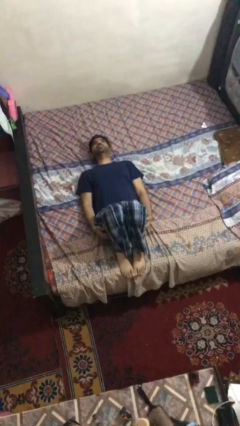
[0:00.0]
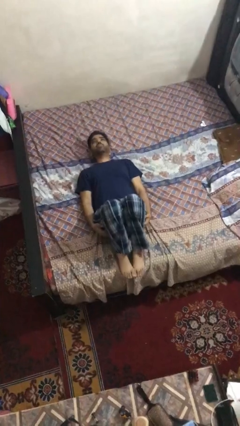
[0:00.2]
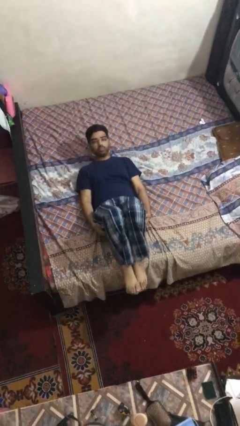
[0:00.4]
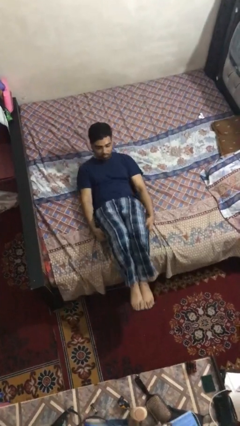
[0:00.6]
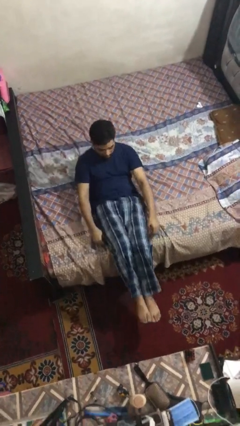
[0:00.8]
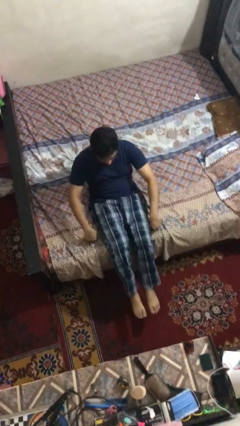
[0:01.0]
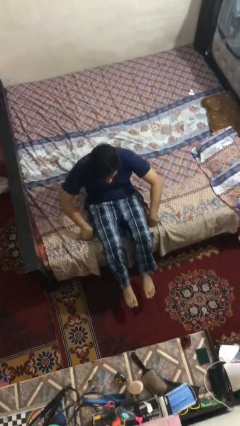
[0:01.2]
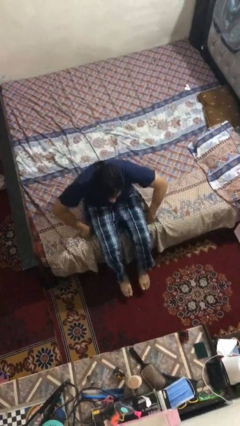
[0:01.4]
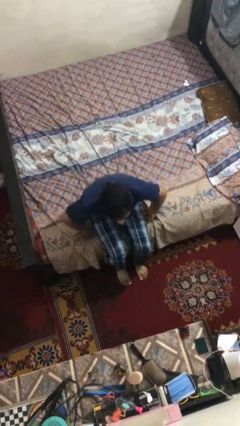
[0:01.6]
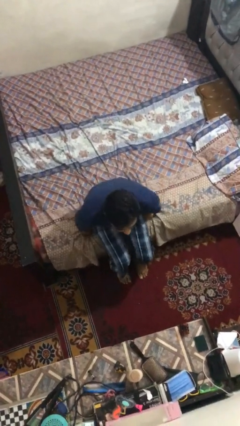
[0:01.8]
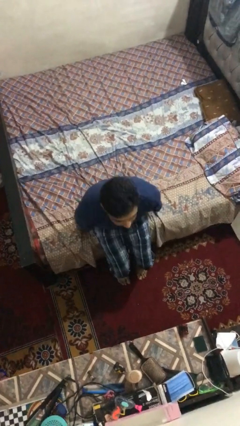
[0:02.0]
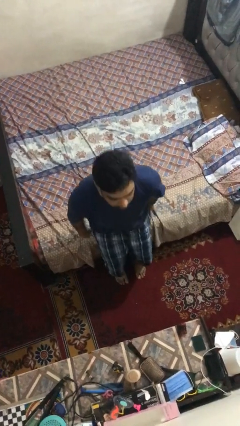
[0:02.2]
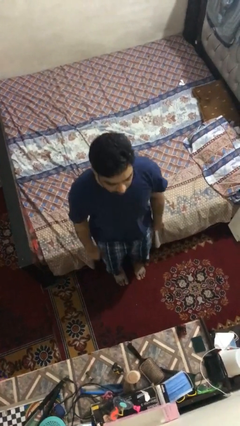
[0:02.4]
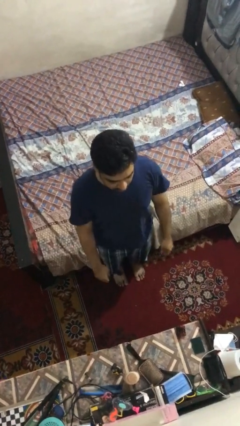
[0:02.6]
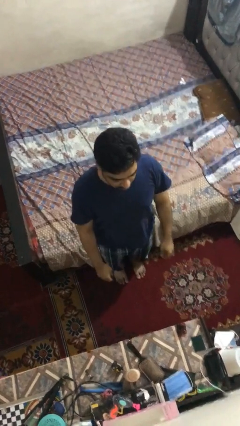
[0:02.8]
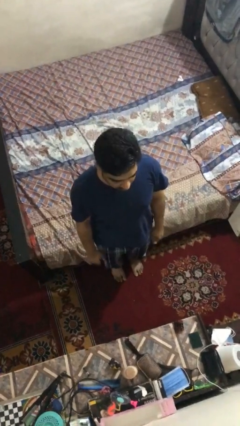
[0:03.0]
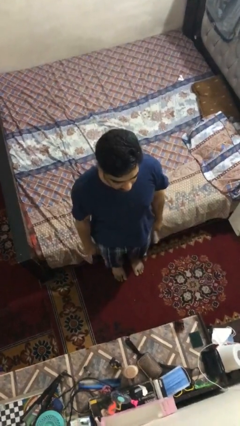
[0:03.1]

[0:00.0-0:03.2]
person stands up

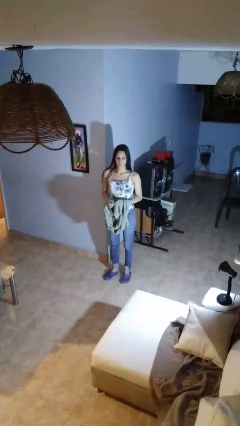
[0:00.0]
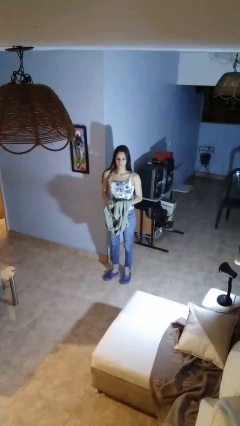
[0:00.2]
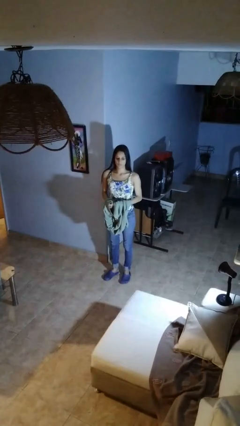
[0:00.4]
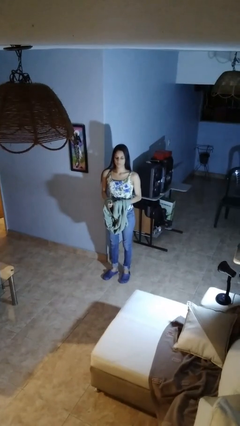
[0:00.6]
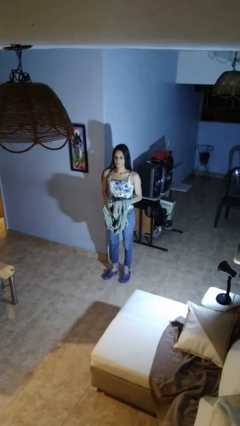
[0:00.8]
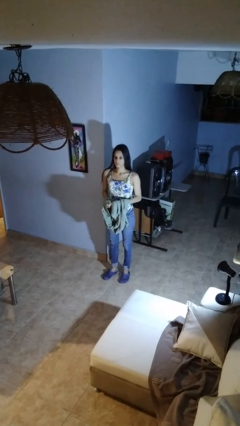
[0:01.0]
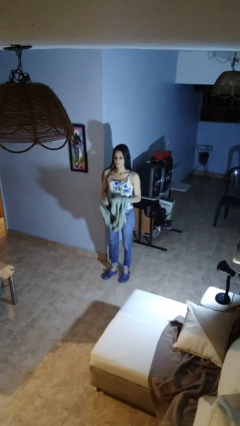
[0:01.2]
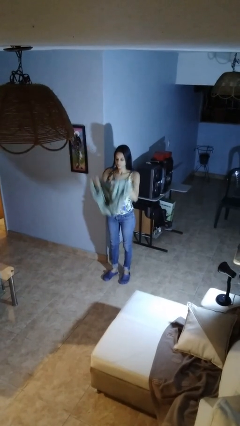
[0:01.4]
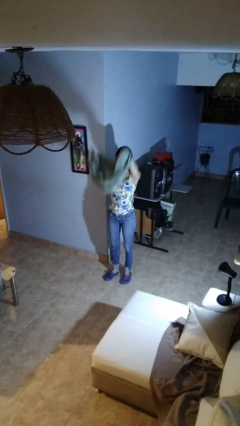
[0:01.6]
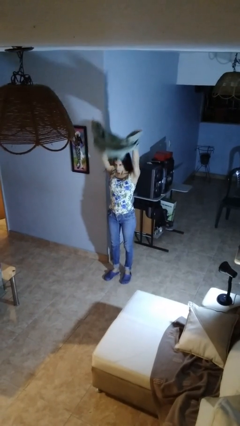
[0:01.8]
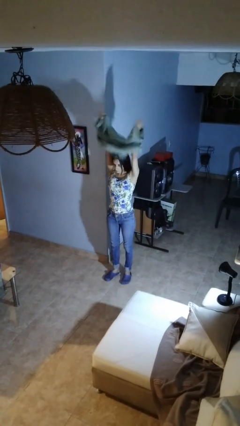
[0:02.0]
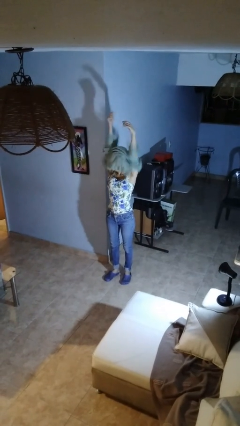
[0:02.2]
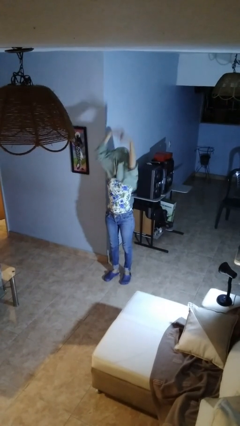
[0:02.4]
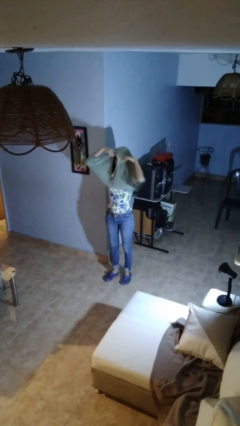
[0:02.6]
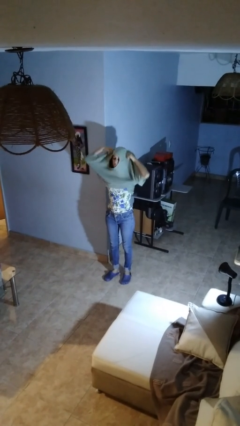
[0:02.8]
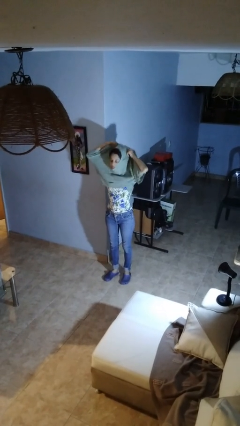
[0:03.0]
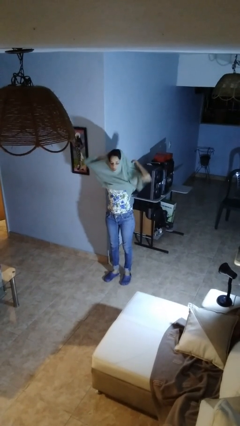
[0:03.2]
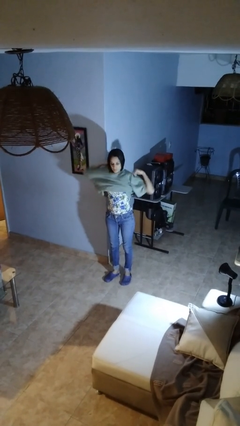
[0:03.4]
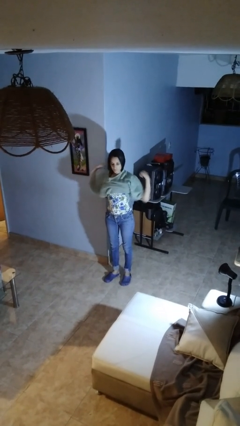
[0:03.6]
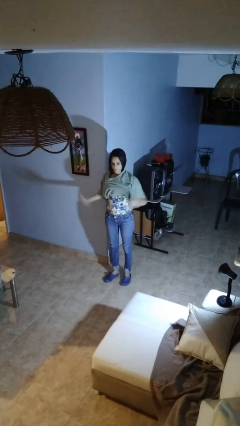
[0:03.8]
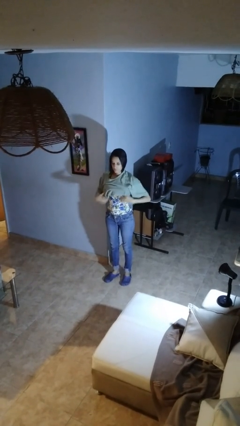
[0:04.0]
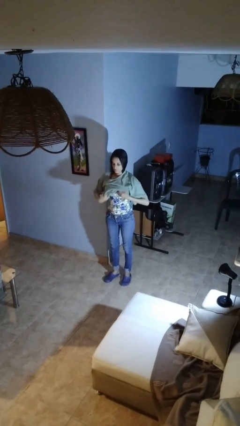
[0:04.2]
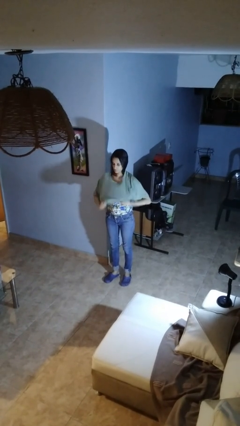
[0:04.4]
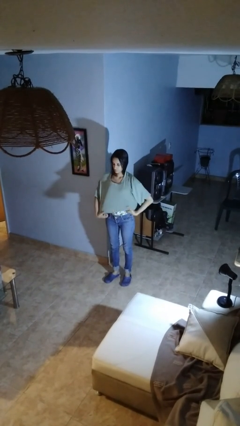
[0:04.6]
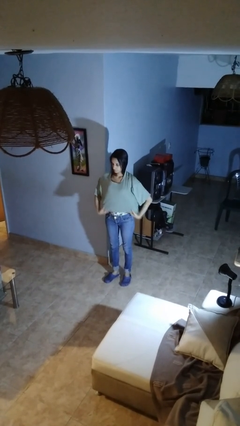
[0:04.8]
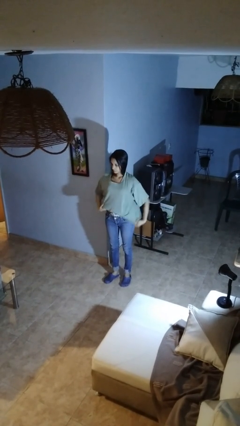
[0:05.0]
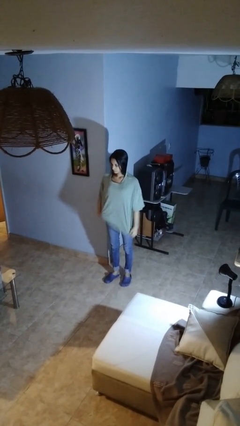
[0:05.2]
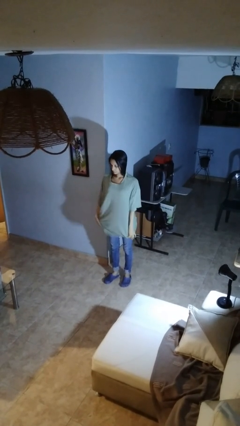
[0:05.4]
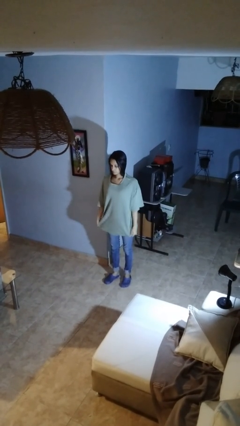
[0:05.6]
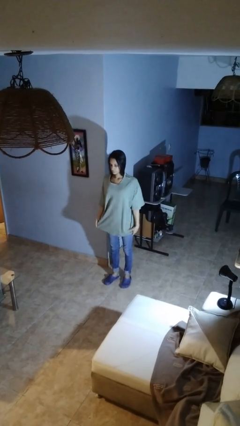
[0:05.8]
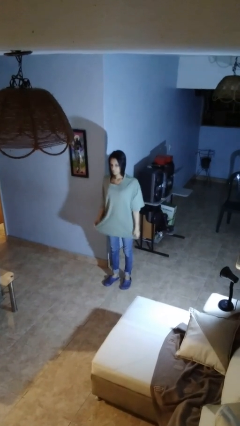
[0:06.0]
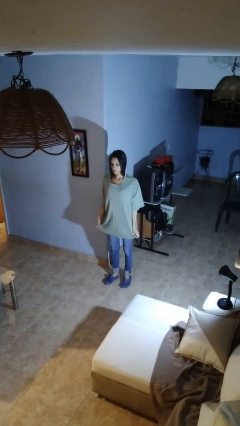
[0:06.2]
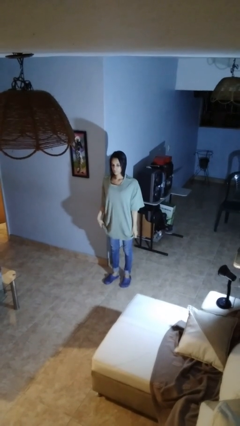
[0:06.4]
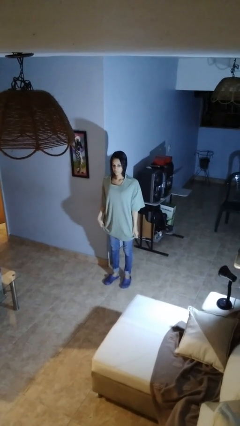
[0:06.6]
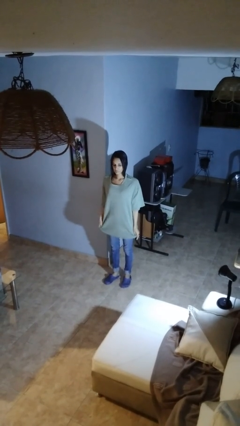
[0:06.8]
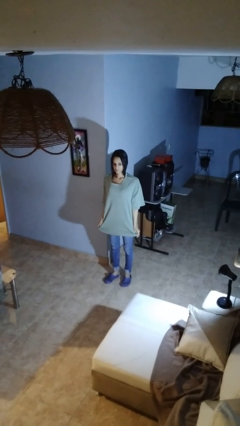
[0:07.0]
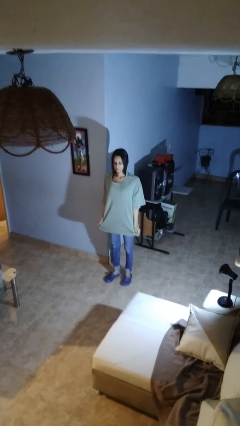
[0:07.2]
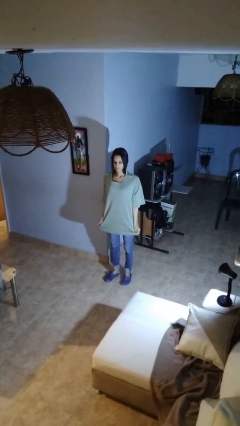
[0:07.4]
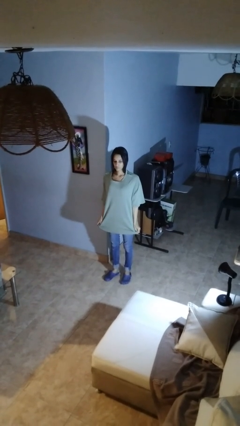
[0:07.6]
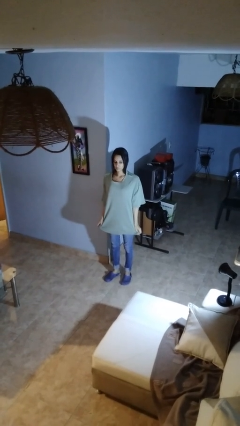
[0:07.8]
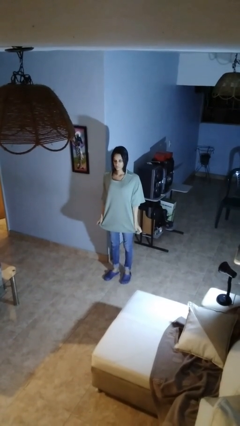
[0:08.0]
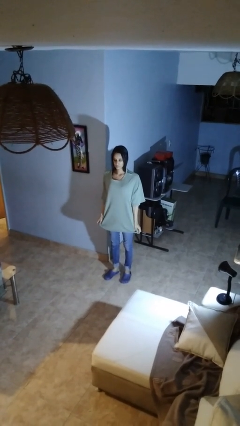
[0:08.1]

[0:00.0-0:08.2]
person puts on shirt

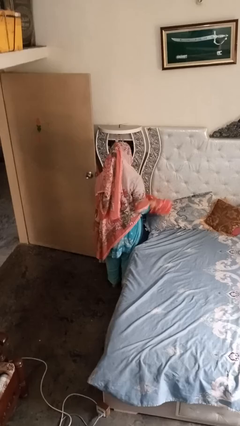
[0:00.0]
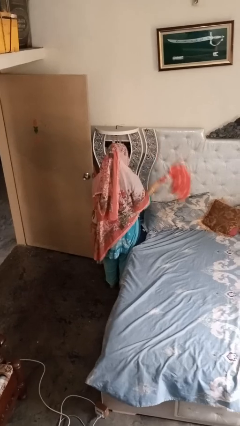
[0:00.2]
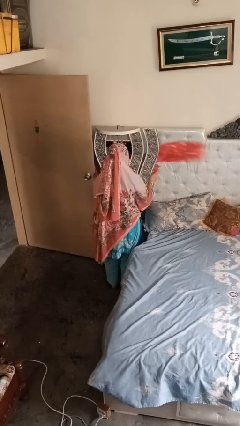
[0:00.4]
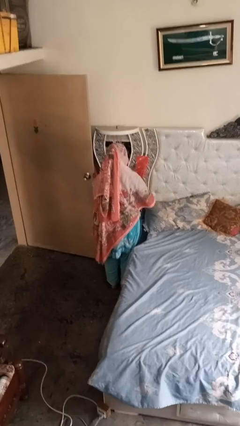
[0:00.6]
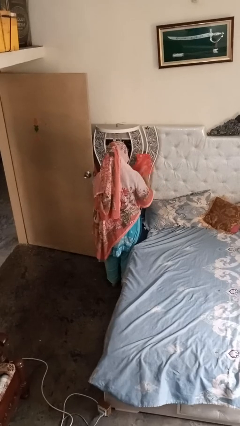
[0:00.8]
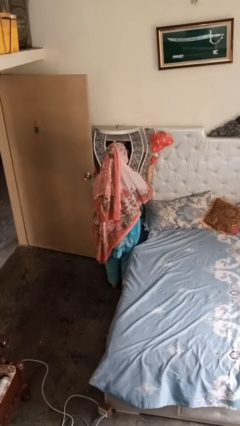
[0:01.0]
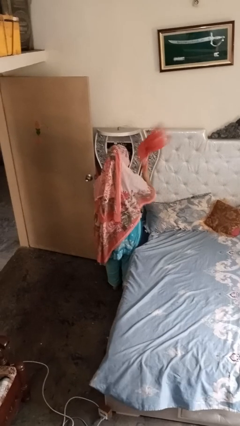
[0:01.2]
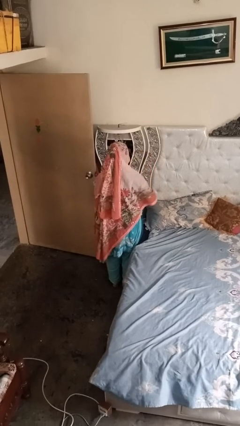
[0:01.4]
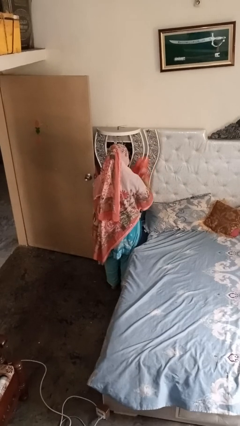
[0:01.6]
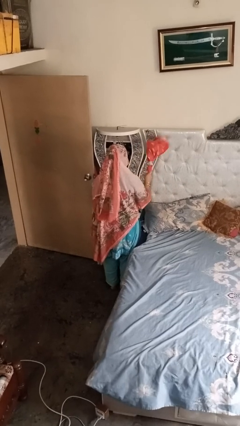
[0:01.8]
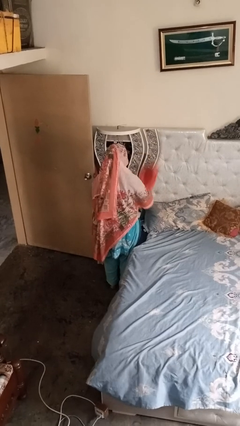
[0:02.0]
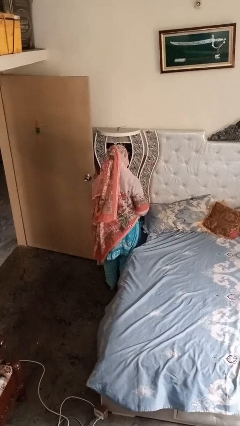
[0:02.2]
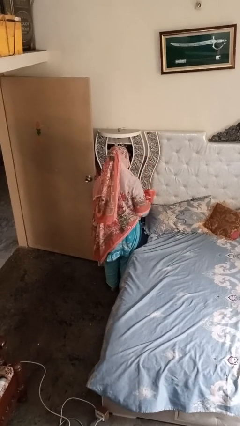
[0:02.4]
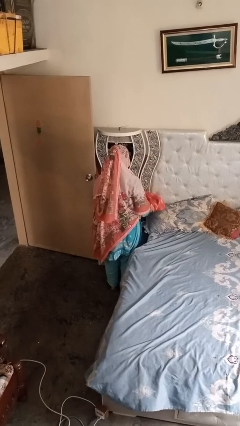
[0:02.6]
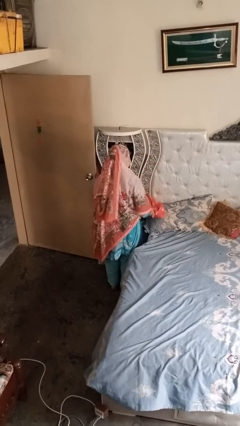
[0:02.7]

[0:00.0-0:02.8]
person dusts furniture

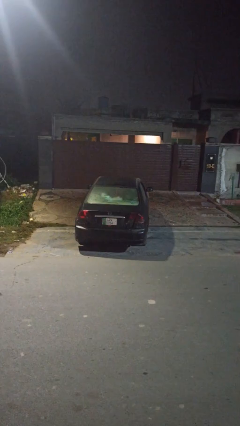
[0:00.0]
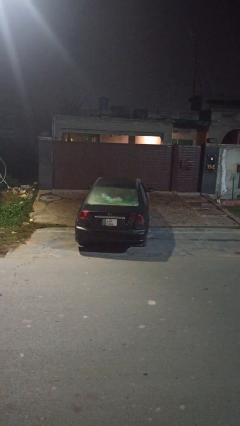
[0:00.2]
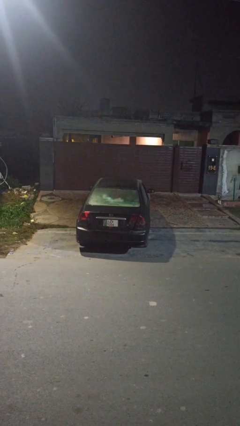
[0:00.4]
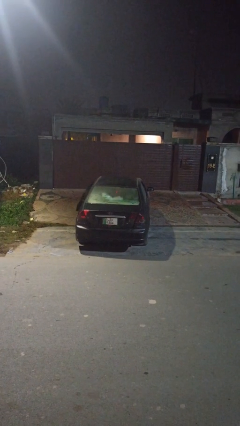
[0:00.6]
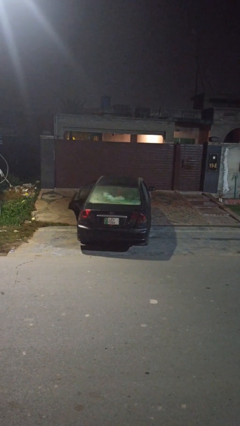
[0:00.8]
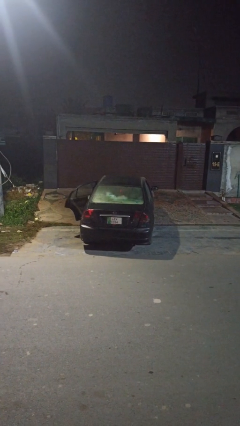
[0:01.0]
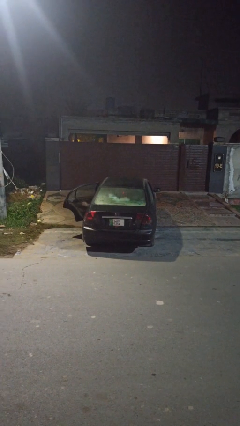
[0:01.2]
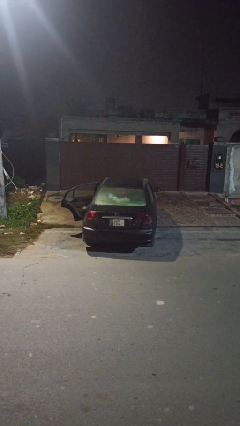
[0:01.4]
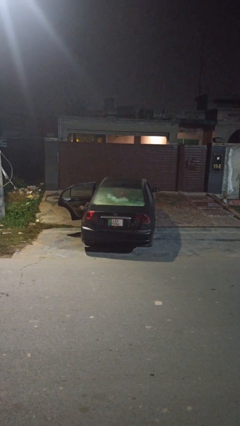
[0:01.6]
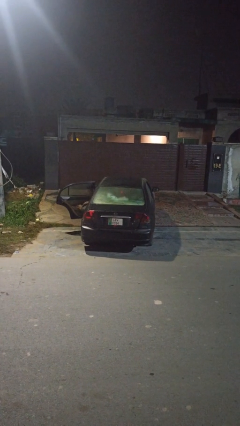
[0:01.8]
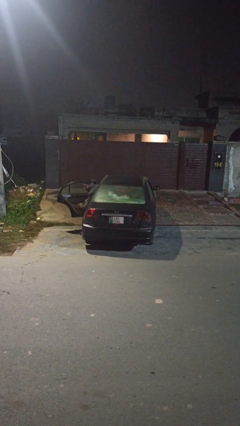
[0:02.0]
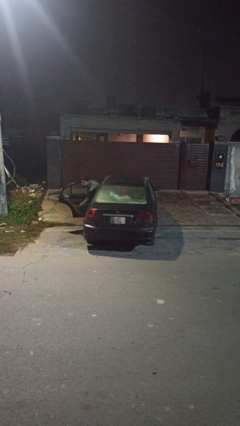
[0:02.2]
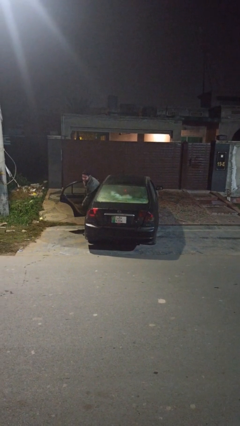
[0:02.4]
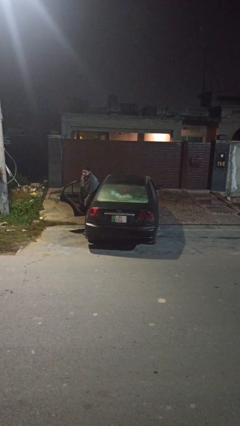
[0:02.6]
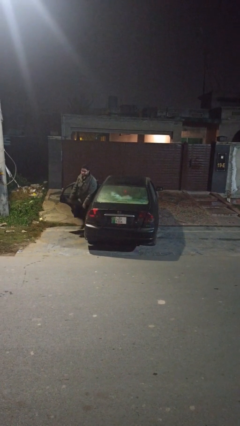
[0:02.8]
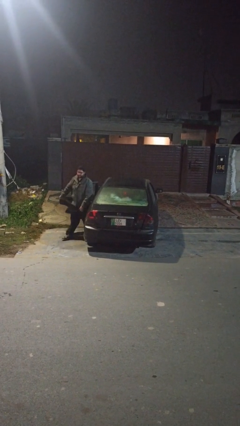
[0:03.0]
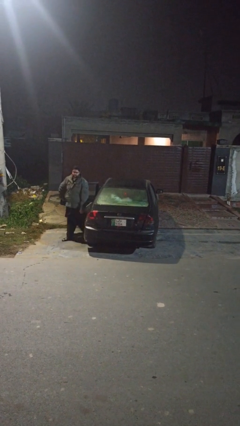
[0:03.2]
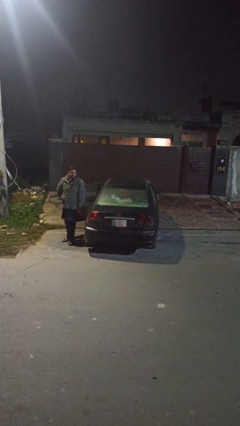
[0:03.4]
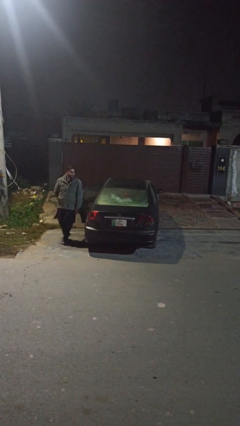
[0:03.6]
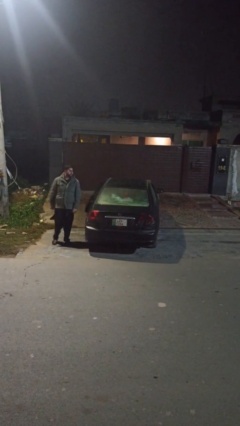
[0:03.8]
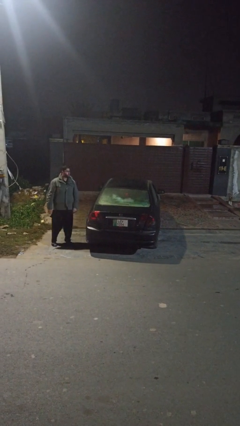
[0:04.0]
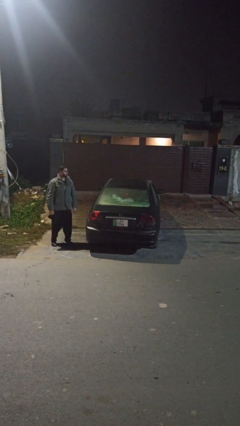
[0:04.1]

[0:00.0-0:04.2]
car drops off person
